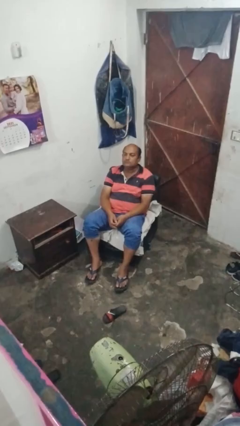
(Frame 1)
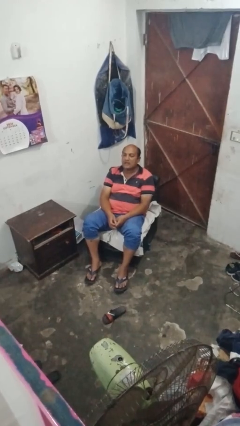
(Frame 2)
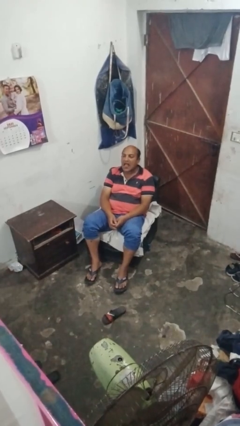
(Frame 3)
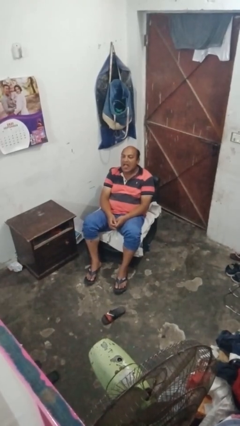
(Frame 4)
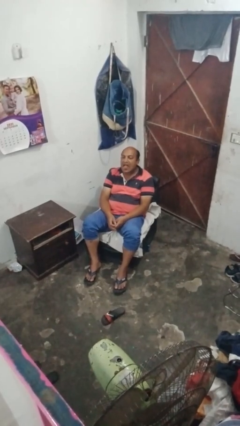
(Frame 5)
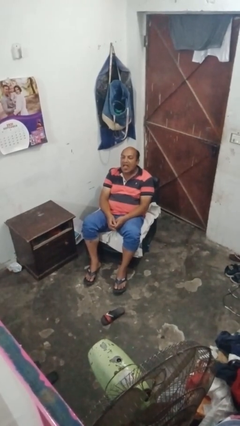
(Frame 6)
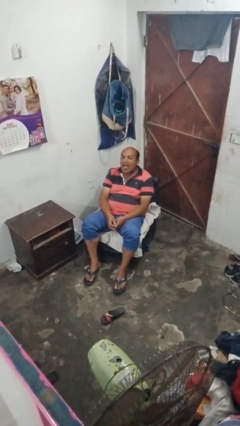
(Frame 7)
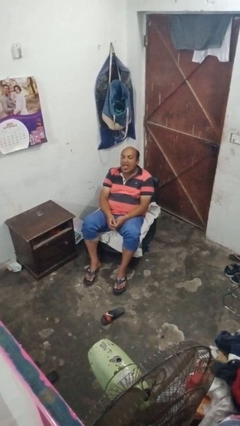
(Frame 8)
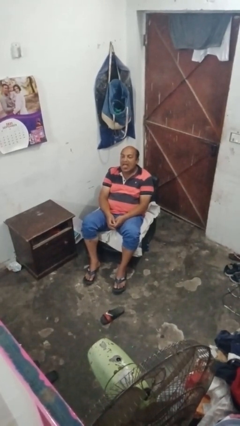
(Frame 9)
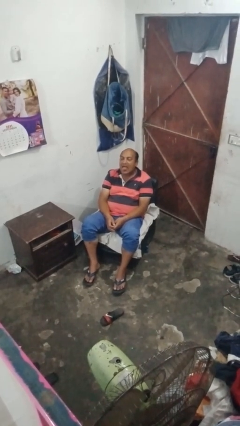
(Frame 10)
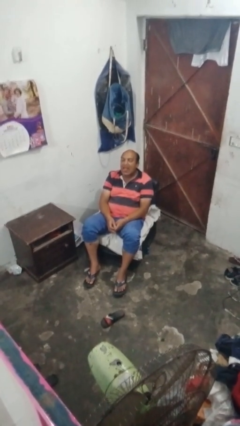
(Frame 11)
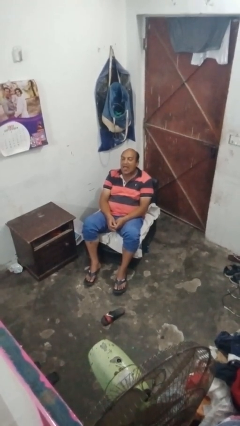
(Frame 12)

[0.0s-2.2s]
person sticks out tongue

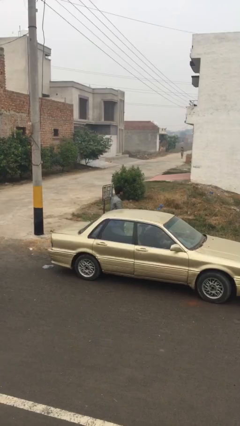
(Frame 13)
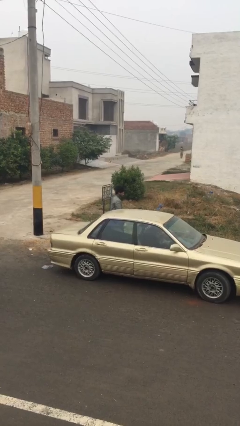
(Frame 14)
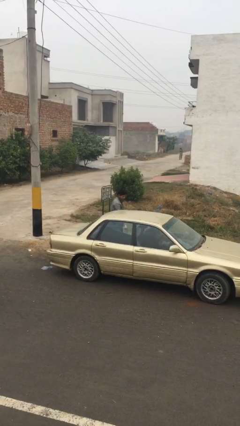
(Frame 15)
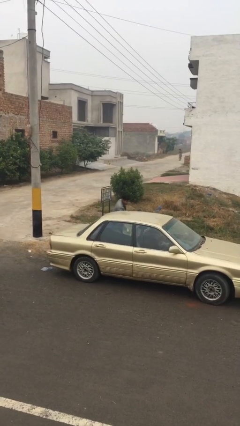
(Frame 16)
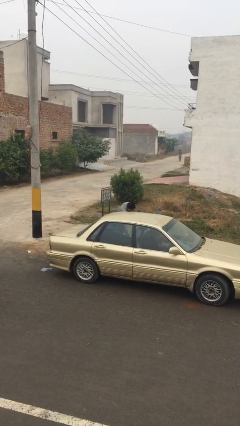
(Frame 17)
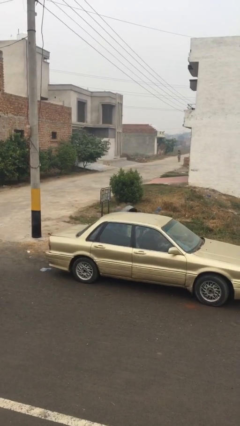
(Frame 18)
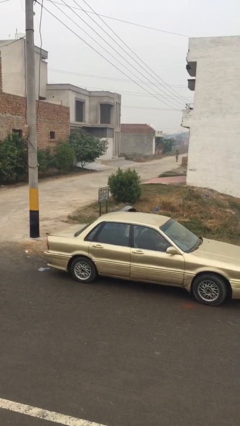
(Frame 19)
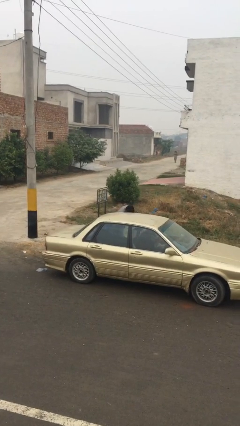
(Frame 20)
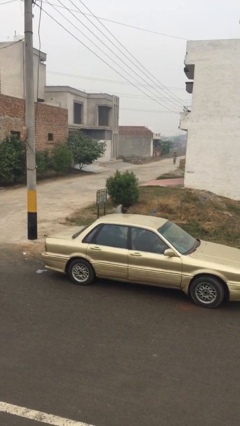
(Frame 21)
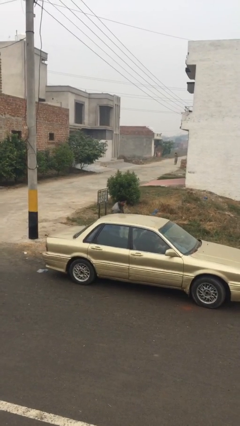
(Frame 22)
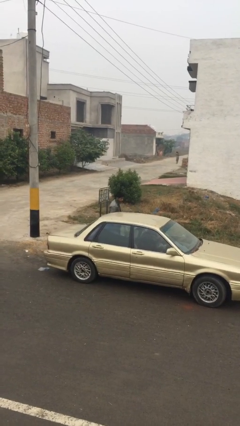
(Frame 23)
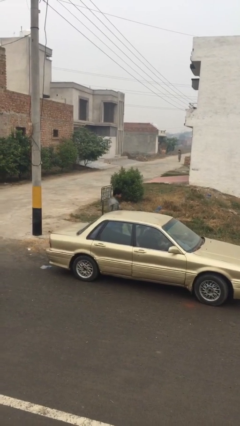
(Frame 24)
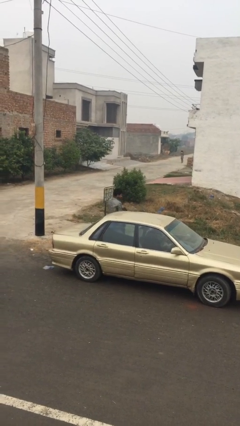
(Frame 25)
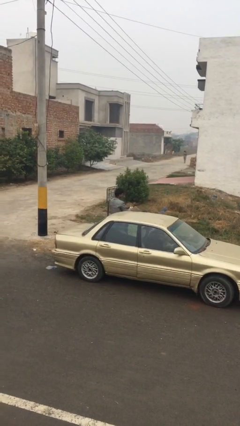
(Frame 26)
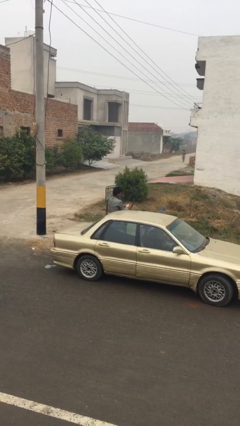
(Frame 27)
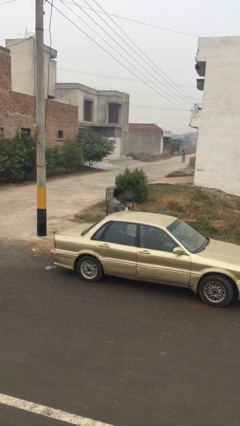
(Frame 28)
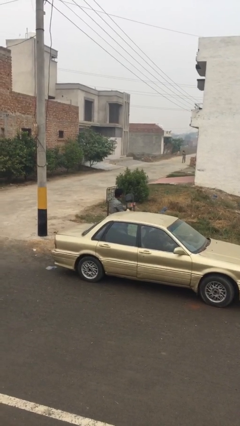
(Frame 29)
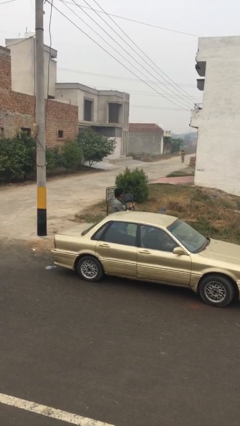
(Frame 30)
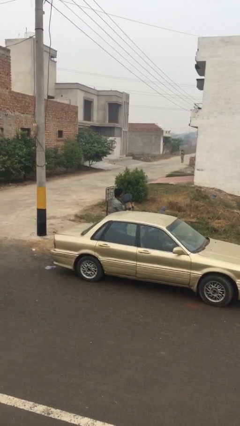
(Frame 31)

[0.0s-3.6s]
person unloads car

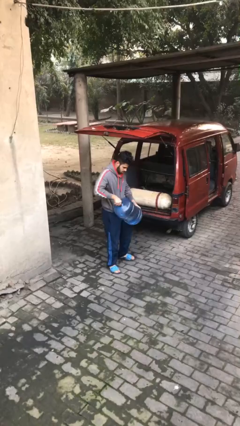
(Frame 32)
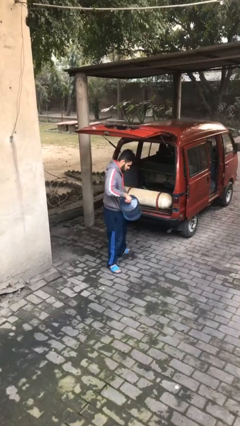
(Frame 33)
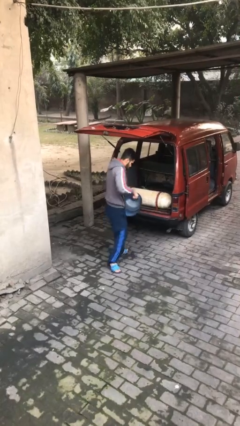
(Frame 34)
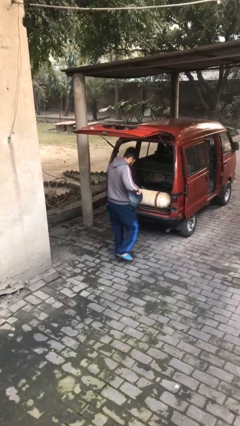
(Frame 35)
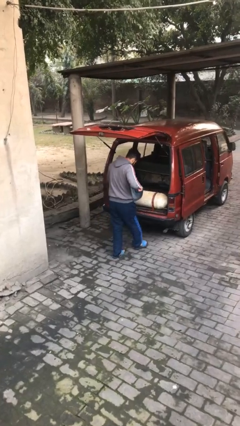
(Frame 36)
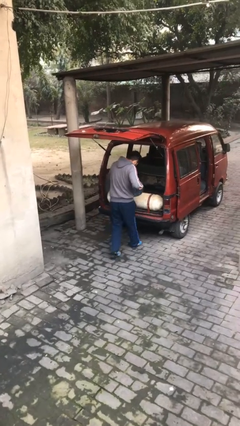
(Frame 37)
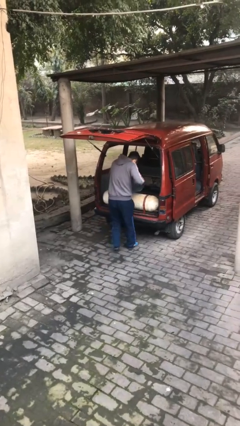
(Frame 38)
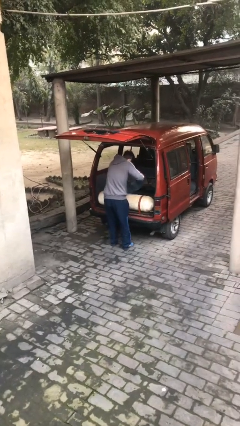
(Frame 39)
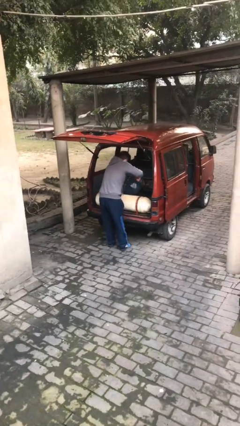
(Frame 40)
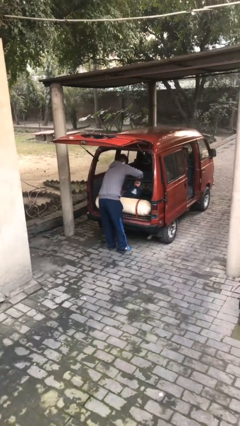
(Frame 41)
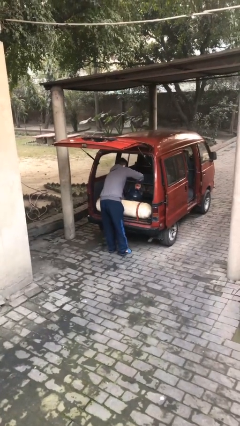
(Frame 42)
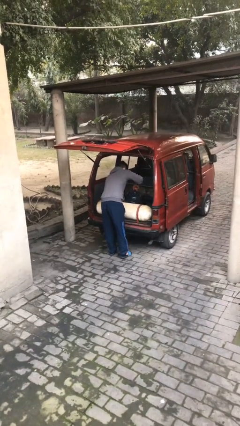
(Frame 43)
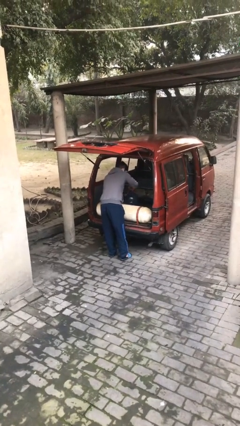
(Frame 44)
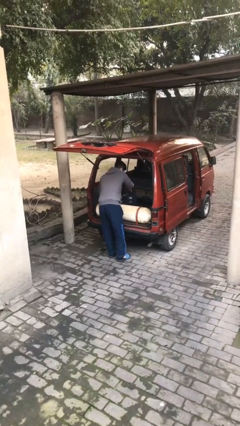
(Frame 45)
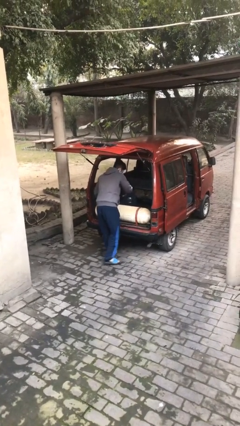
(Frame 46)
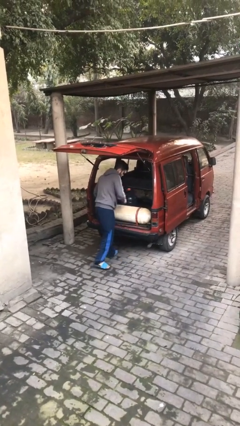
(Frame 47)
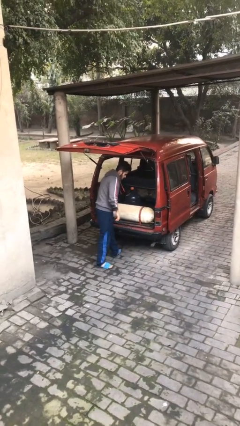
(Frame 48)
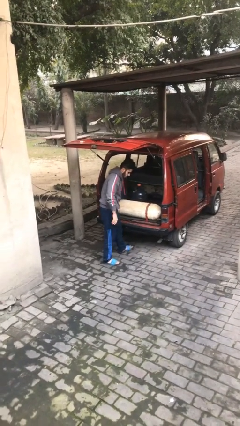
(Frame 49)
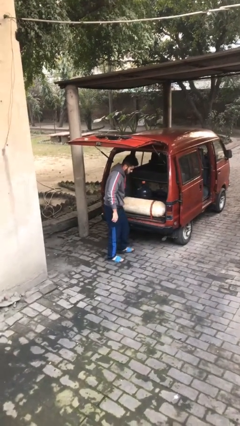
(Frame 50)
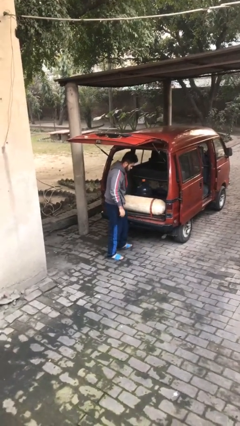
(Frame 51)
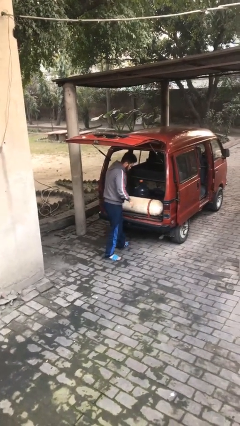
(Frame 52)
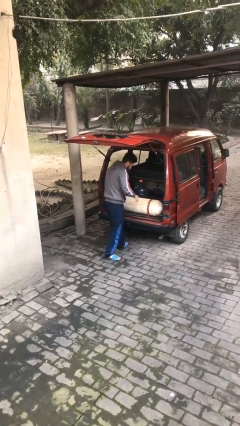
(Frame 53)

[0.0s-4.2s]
person loads car

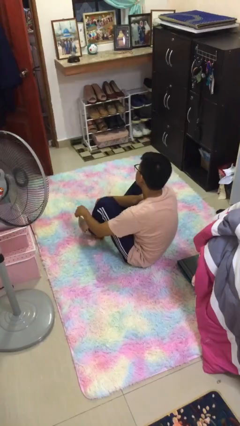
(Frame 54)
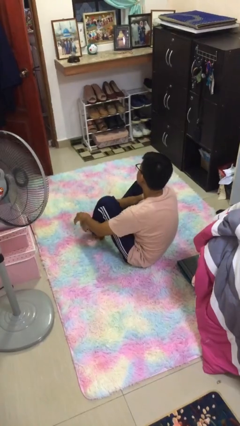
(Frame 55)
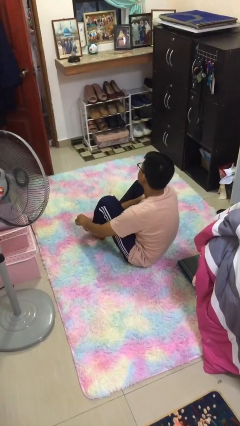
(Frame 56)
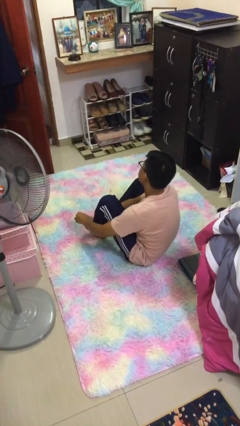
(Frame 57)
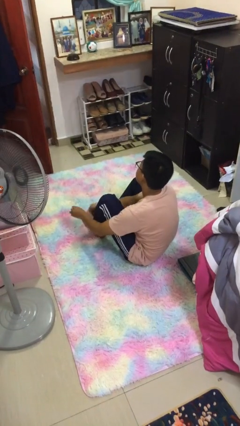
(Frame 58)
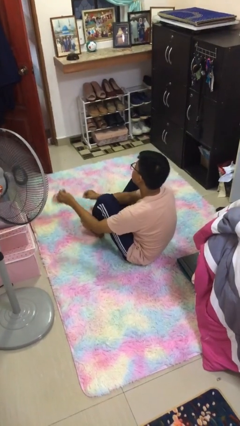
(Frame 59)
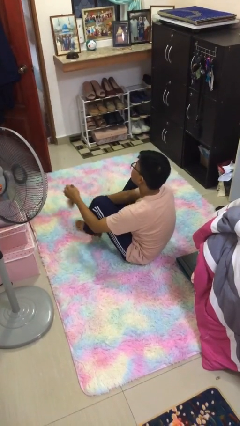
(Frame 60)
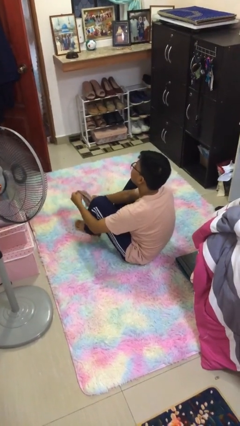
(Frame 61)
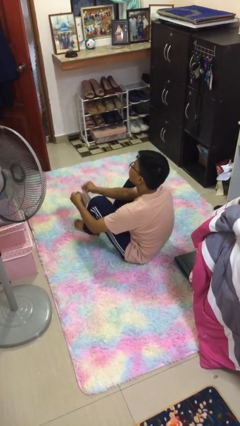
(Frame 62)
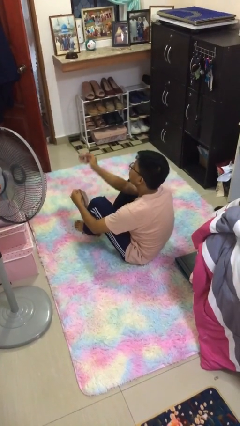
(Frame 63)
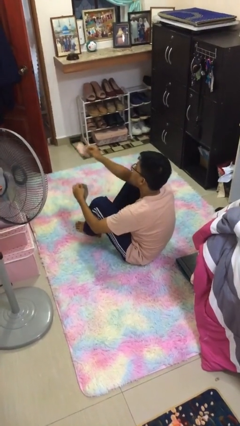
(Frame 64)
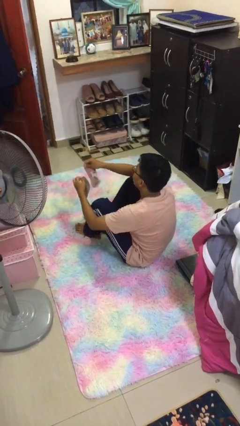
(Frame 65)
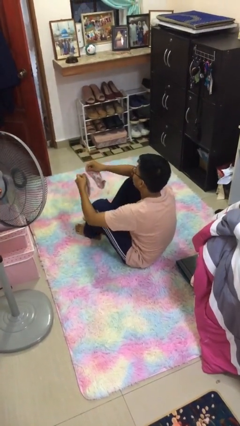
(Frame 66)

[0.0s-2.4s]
person takes off socks

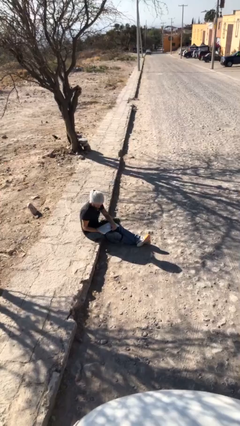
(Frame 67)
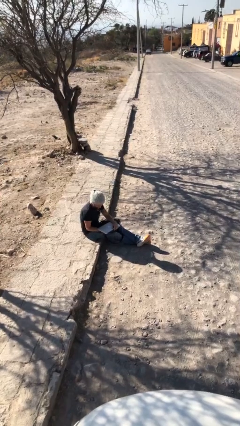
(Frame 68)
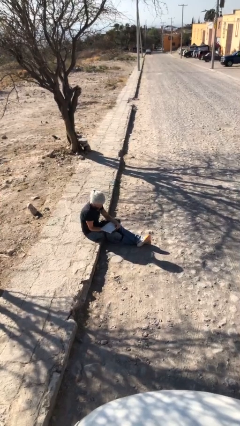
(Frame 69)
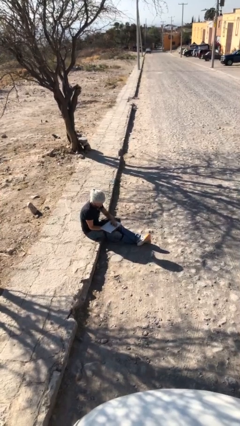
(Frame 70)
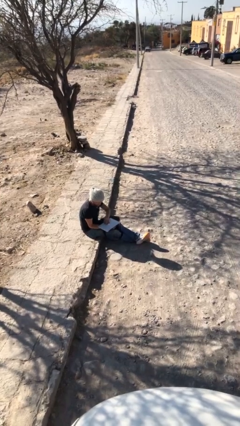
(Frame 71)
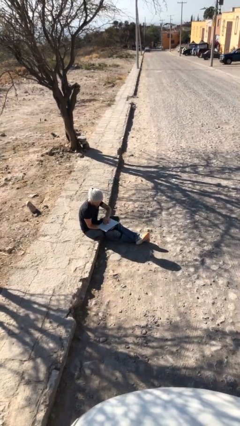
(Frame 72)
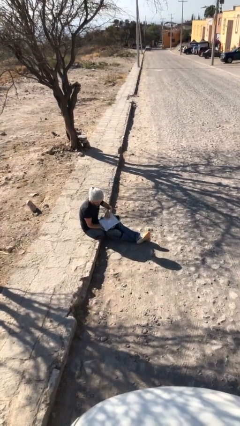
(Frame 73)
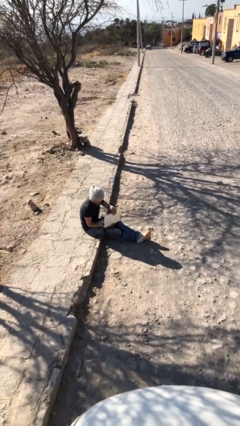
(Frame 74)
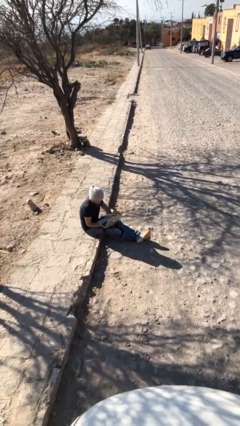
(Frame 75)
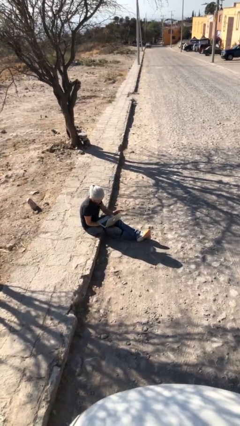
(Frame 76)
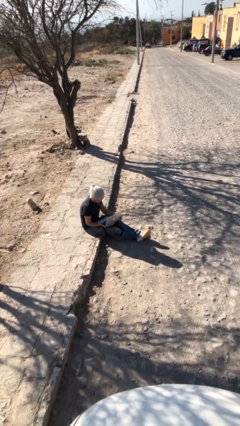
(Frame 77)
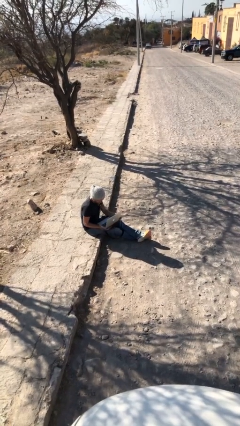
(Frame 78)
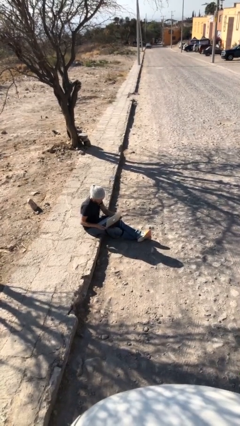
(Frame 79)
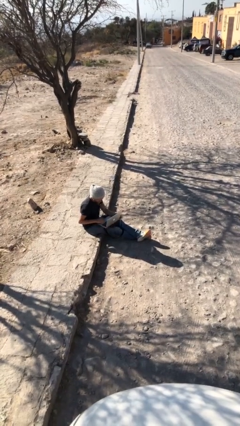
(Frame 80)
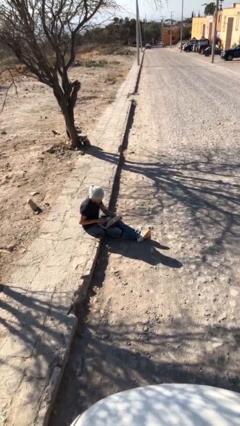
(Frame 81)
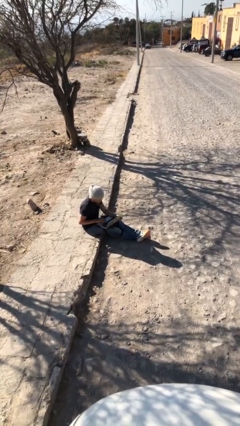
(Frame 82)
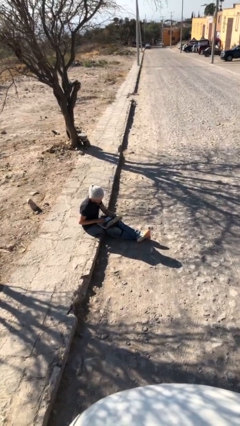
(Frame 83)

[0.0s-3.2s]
person interacts with laptop

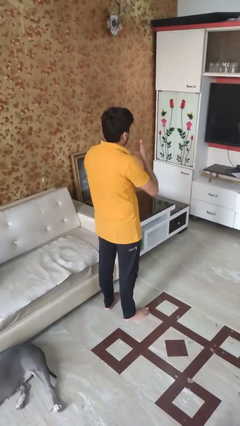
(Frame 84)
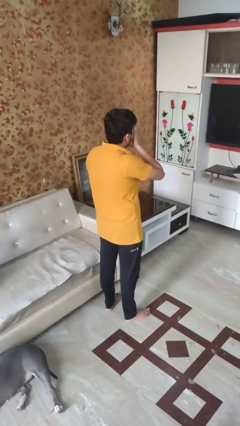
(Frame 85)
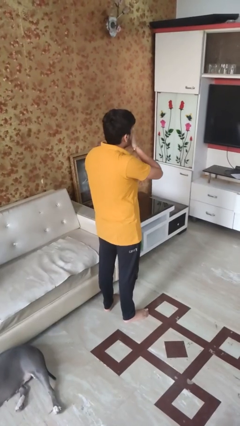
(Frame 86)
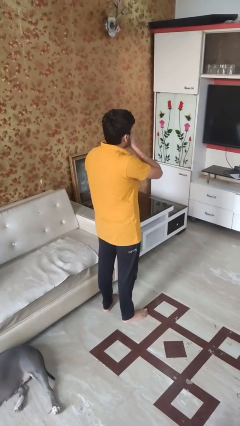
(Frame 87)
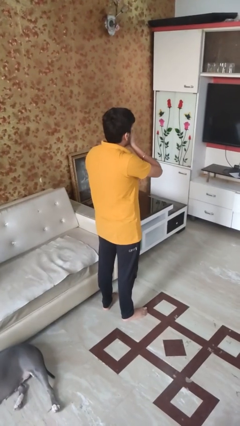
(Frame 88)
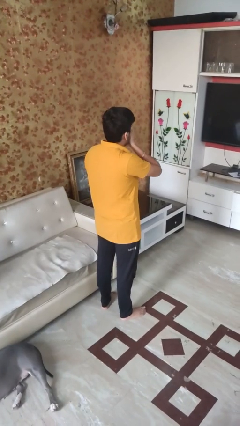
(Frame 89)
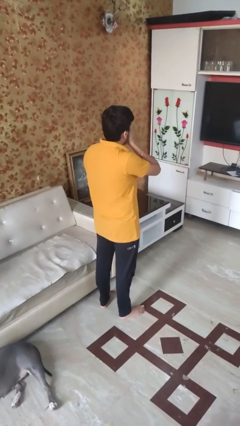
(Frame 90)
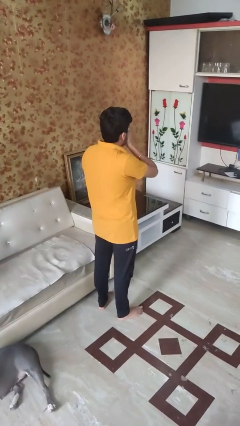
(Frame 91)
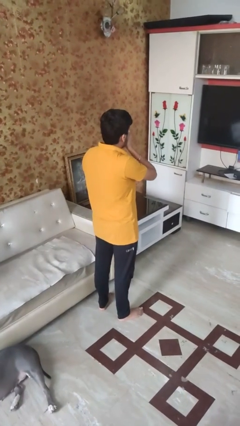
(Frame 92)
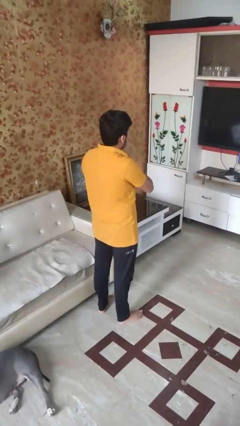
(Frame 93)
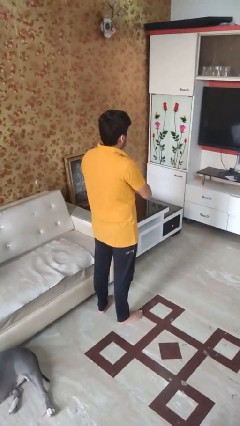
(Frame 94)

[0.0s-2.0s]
person yawns
